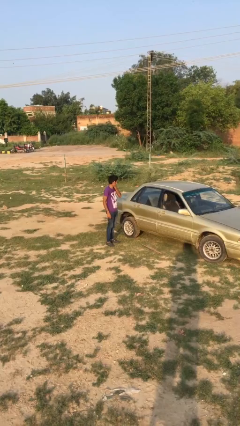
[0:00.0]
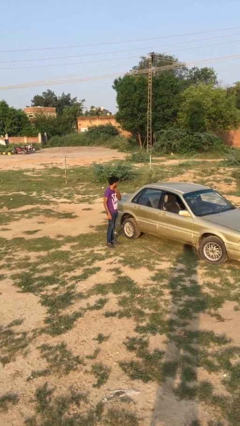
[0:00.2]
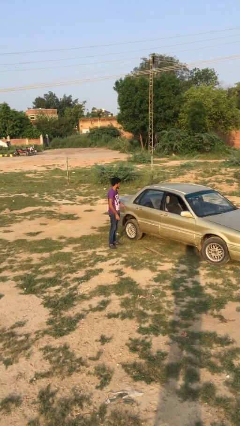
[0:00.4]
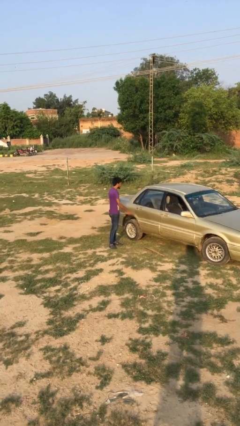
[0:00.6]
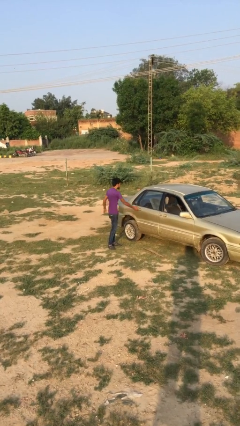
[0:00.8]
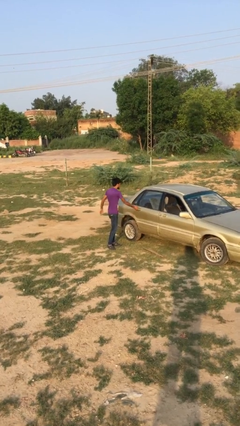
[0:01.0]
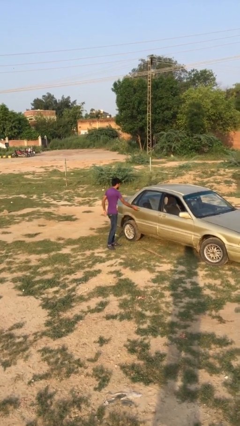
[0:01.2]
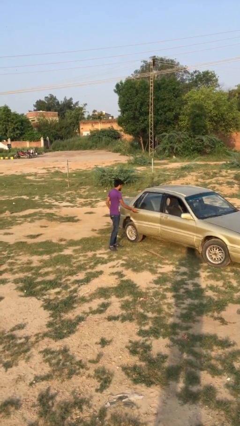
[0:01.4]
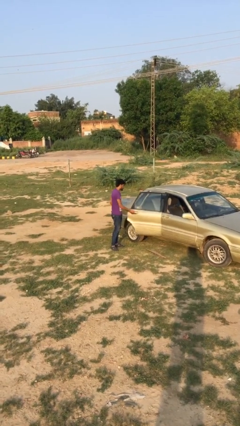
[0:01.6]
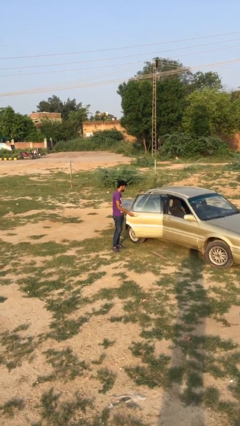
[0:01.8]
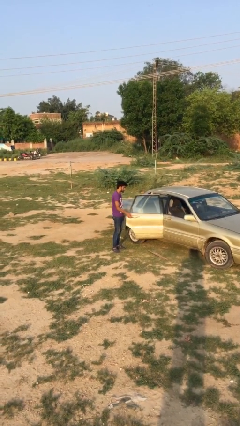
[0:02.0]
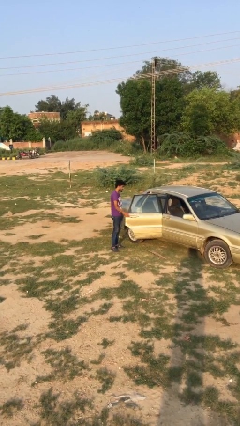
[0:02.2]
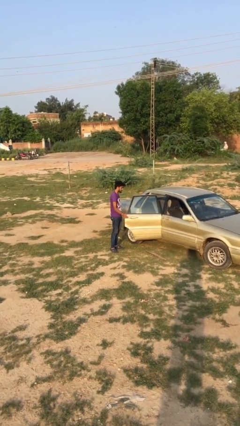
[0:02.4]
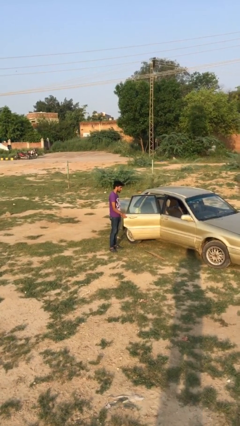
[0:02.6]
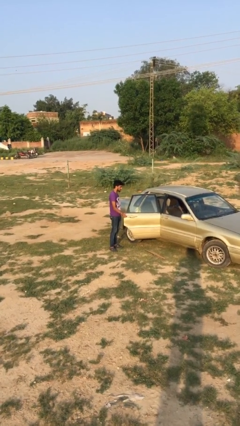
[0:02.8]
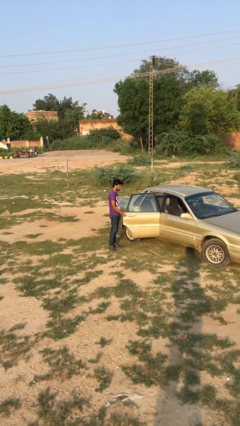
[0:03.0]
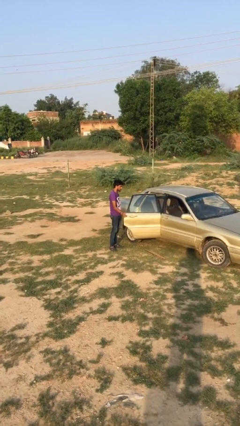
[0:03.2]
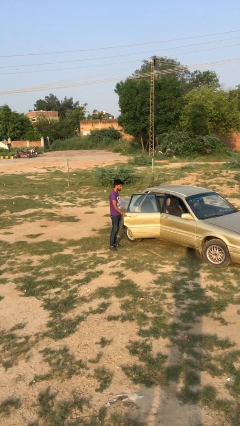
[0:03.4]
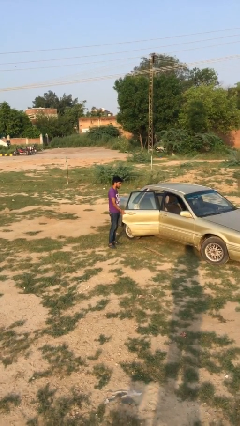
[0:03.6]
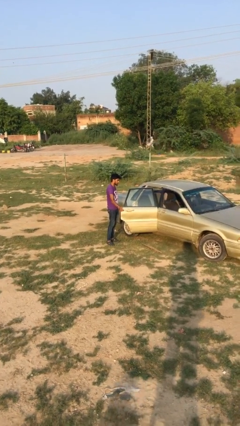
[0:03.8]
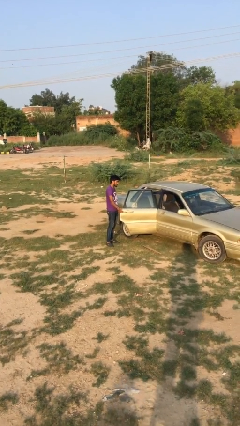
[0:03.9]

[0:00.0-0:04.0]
person opens car door

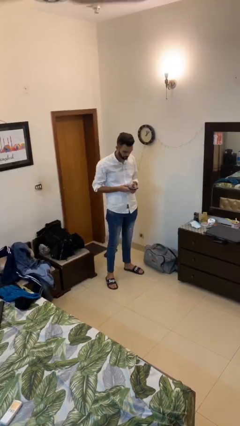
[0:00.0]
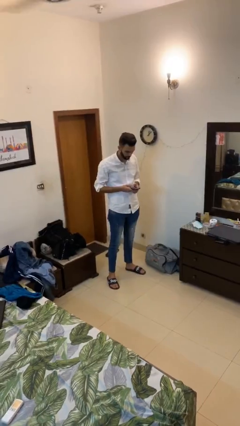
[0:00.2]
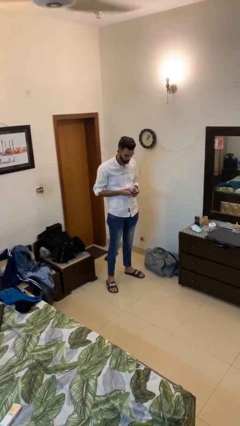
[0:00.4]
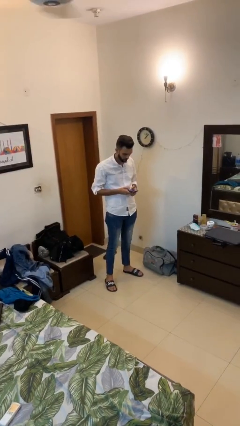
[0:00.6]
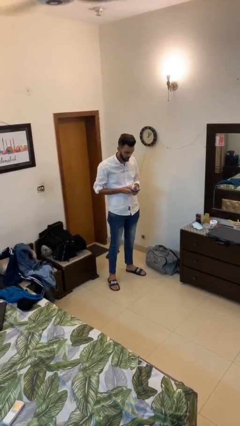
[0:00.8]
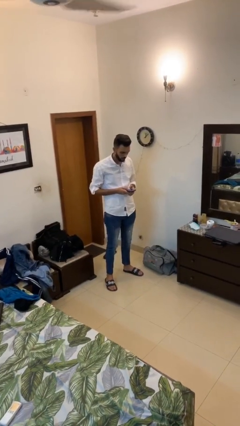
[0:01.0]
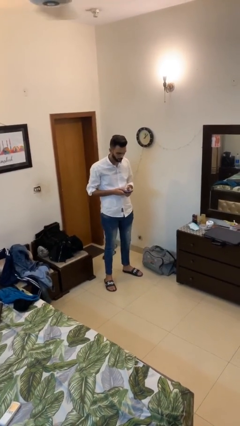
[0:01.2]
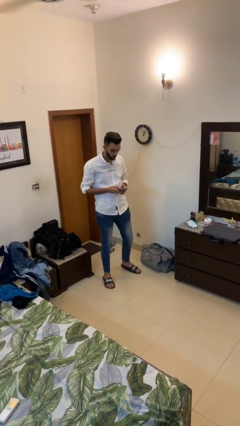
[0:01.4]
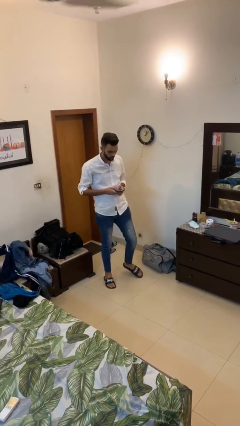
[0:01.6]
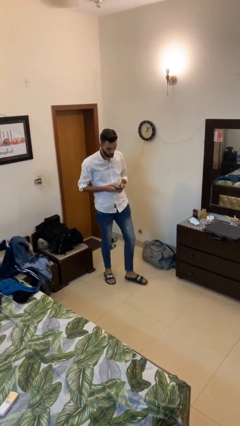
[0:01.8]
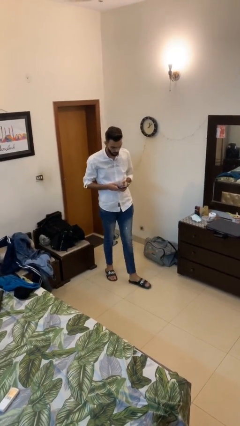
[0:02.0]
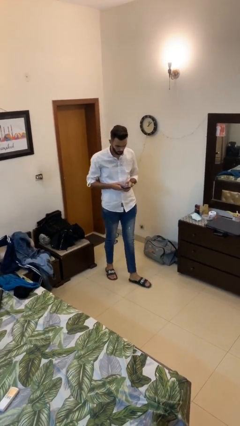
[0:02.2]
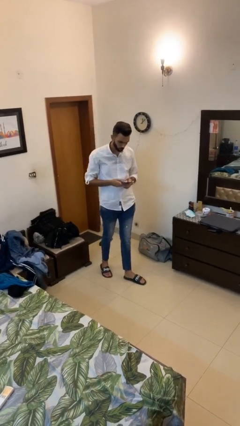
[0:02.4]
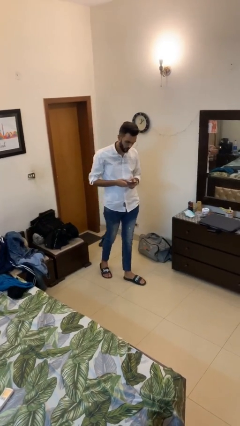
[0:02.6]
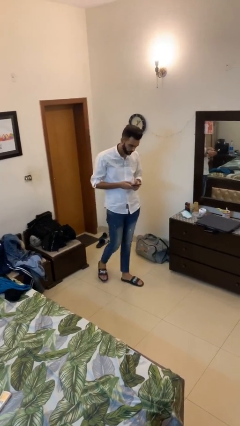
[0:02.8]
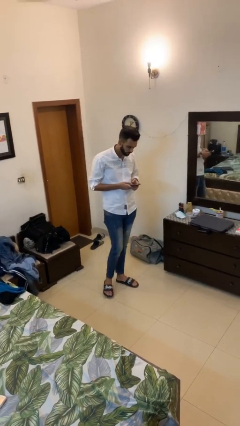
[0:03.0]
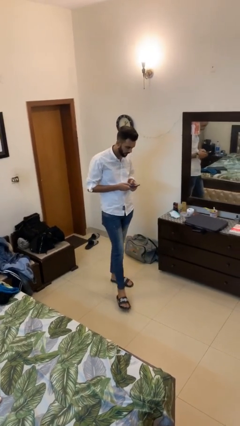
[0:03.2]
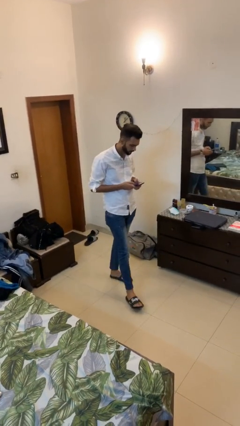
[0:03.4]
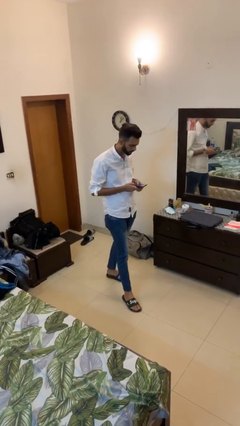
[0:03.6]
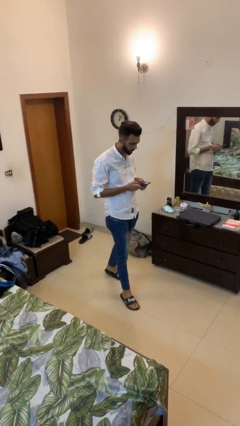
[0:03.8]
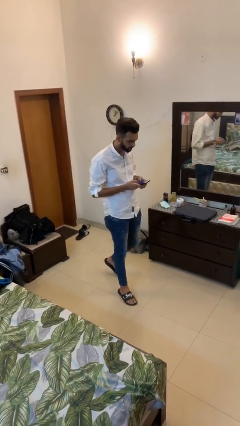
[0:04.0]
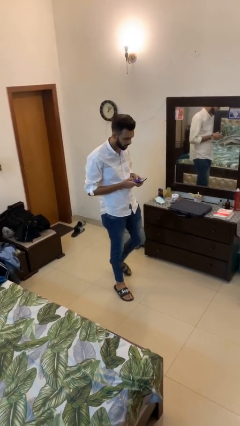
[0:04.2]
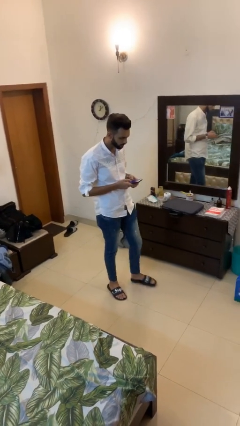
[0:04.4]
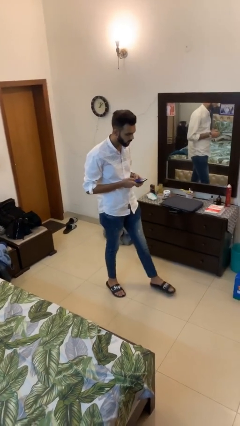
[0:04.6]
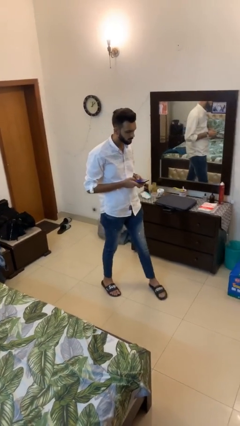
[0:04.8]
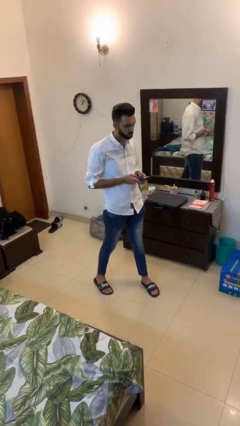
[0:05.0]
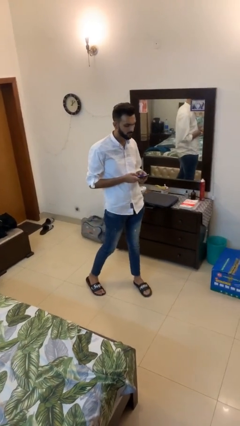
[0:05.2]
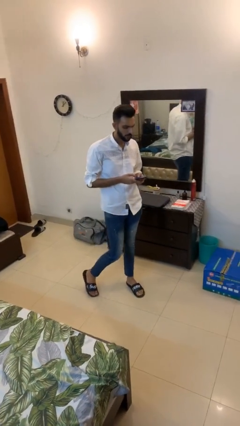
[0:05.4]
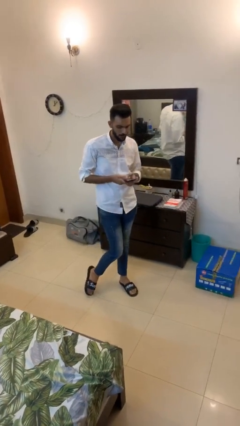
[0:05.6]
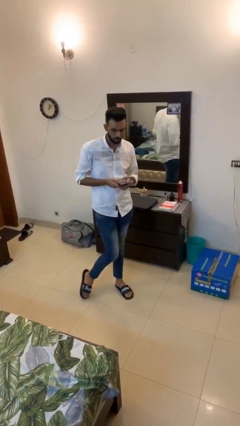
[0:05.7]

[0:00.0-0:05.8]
person texts on phone

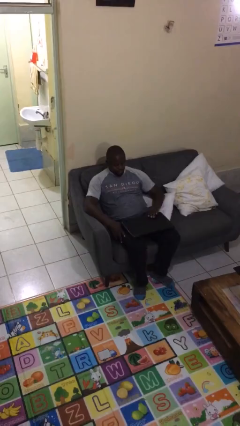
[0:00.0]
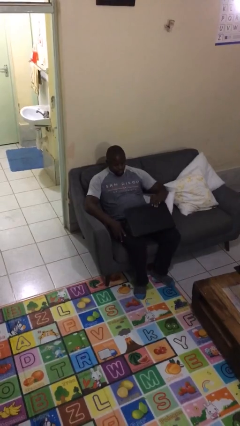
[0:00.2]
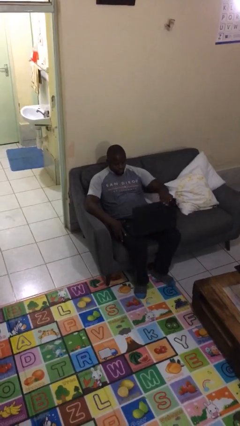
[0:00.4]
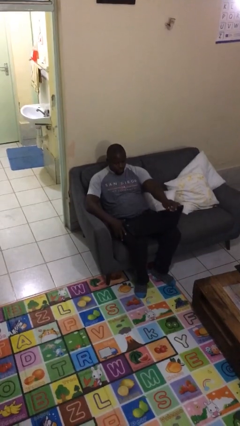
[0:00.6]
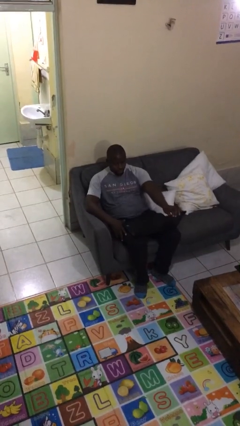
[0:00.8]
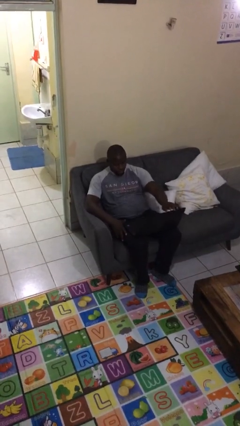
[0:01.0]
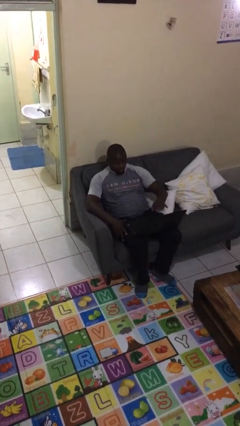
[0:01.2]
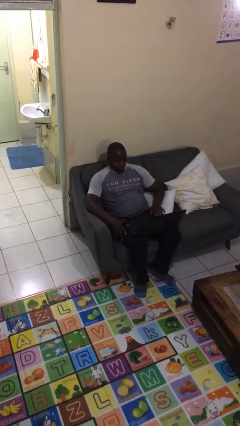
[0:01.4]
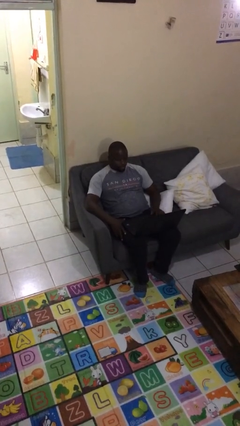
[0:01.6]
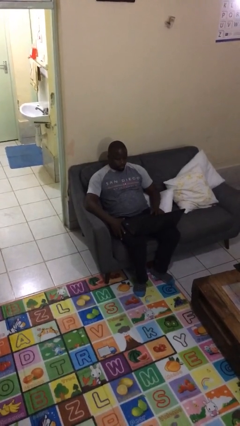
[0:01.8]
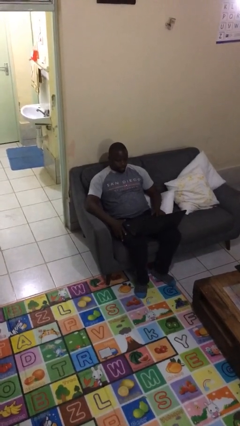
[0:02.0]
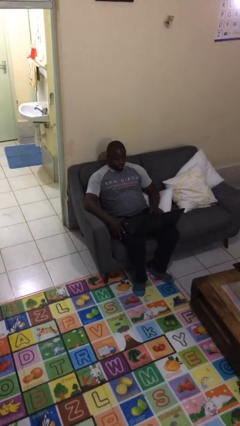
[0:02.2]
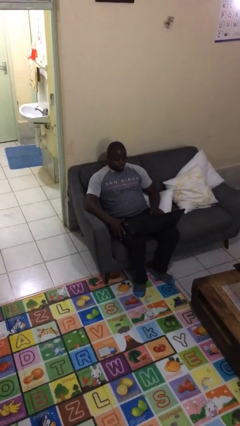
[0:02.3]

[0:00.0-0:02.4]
person opens laptop

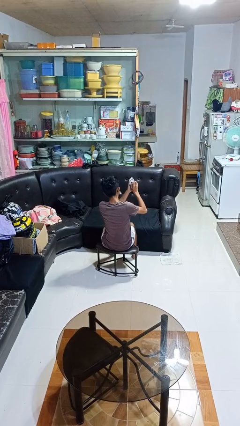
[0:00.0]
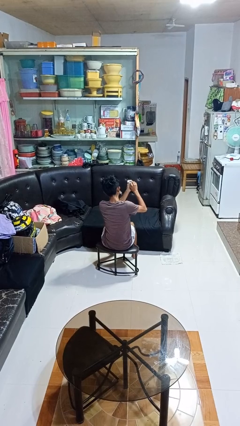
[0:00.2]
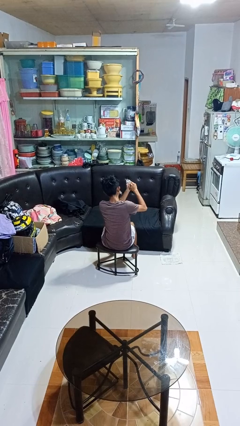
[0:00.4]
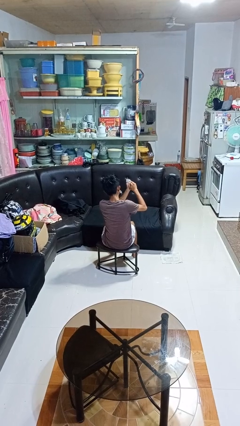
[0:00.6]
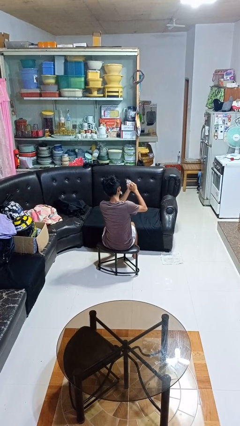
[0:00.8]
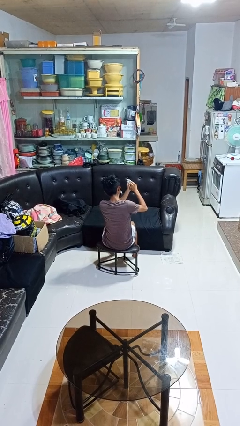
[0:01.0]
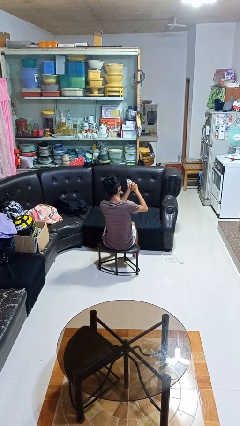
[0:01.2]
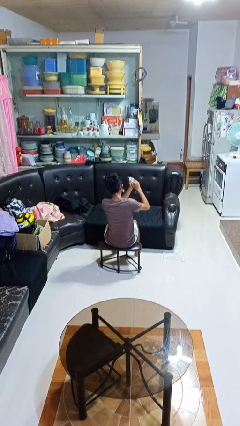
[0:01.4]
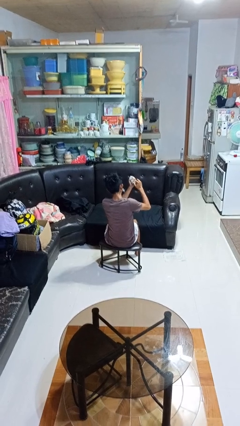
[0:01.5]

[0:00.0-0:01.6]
person crumples paper

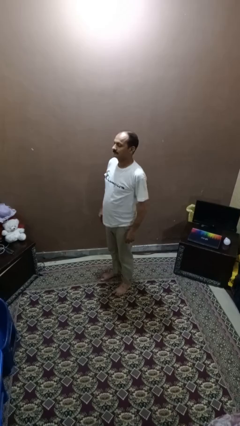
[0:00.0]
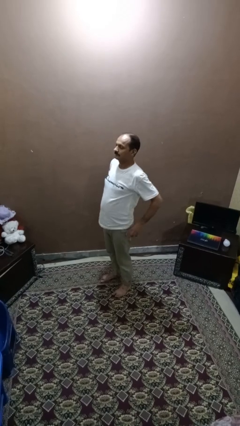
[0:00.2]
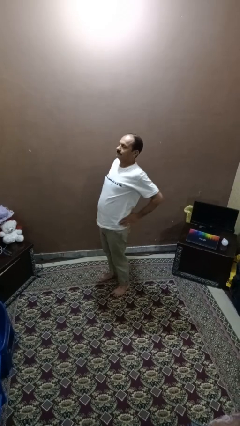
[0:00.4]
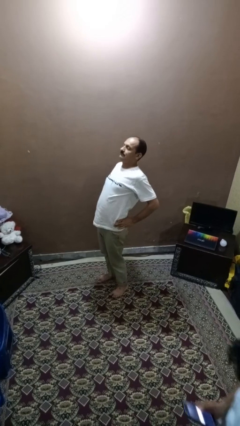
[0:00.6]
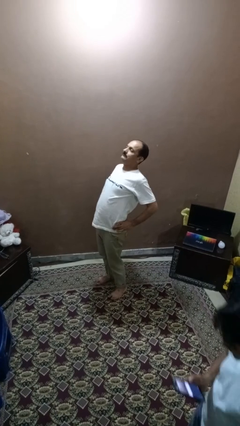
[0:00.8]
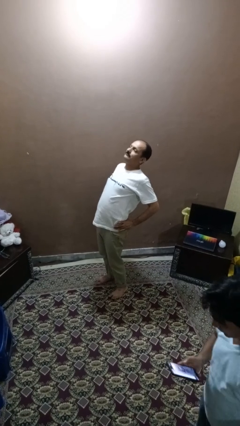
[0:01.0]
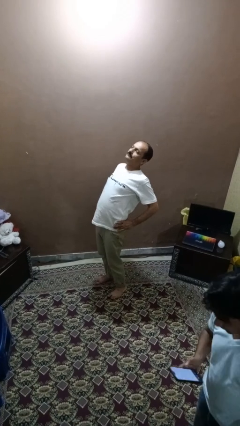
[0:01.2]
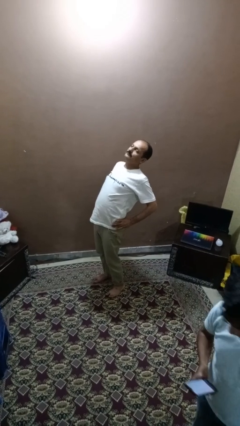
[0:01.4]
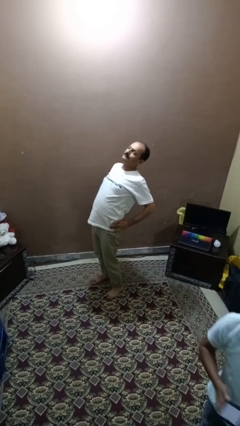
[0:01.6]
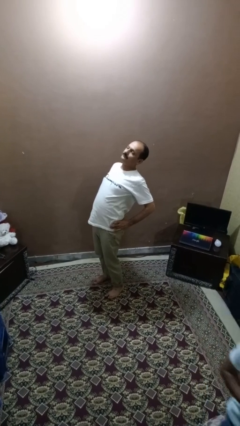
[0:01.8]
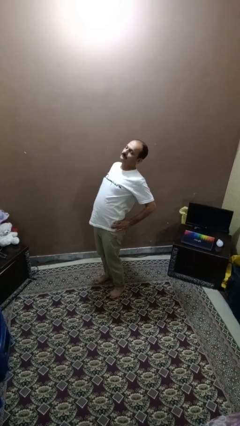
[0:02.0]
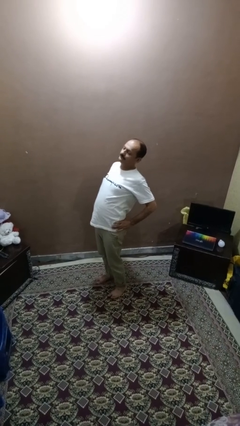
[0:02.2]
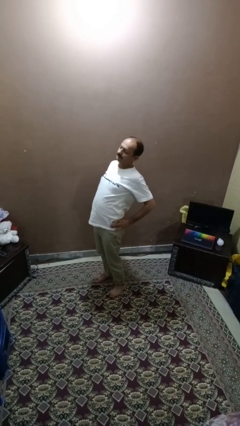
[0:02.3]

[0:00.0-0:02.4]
person stretches back

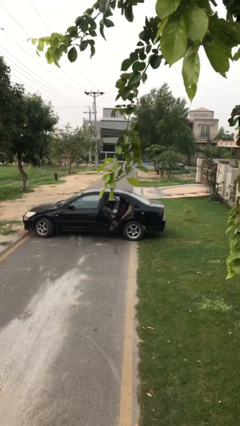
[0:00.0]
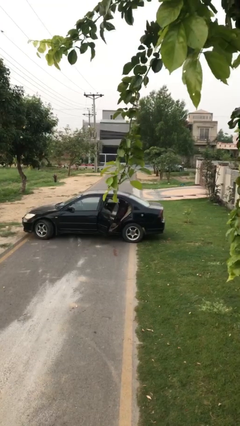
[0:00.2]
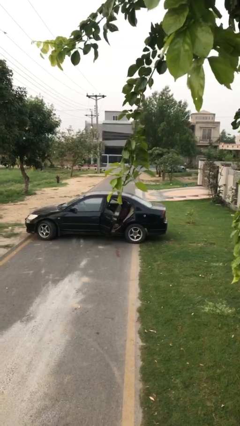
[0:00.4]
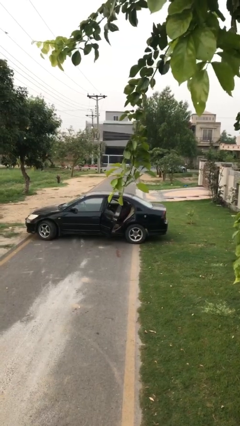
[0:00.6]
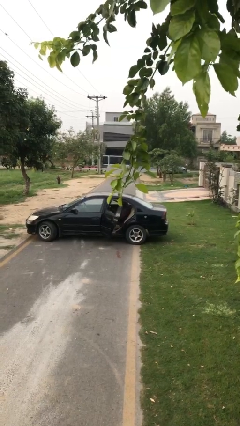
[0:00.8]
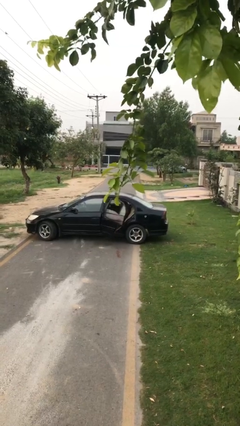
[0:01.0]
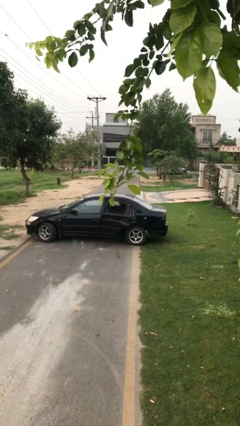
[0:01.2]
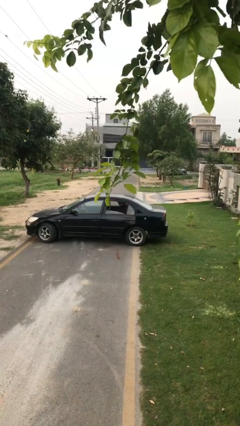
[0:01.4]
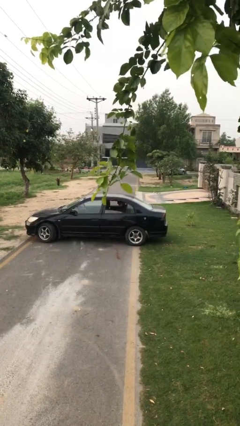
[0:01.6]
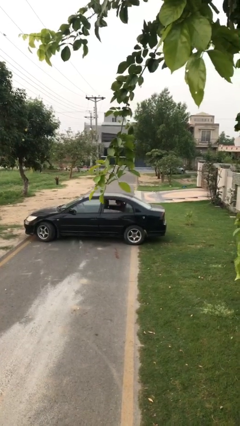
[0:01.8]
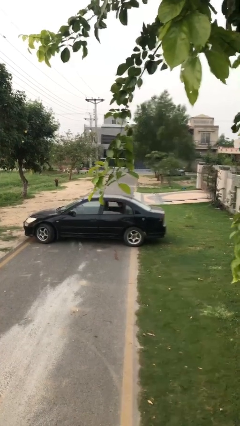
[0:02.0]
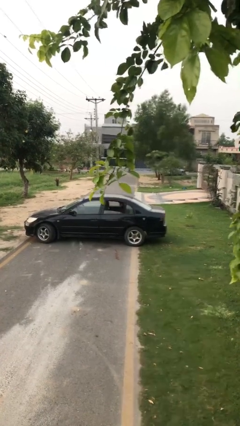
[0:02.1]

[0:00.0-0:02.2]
person closes car door
